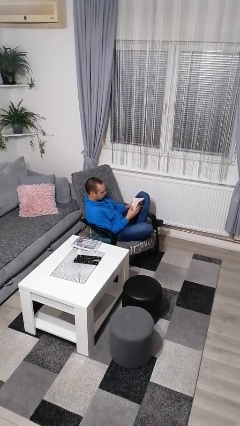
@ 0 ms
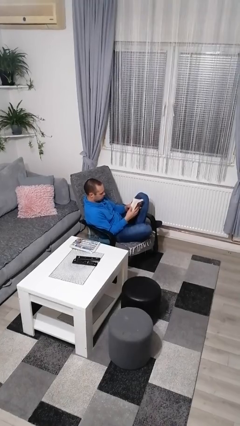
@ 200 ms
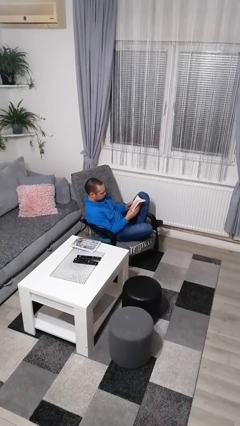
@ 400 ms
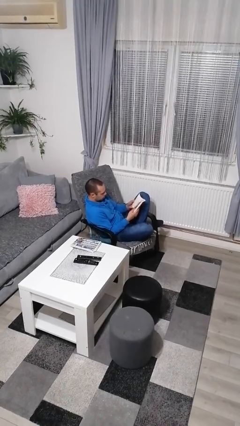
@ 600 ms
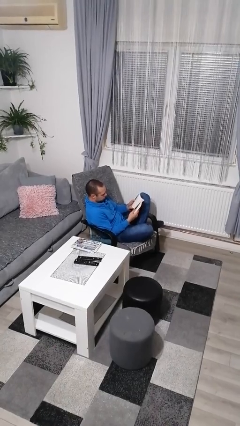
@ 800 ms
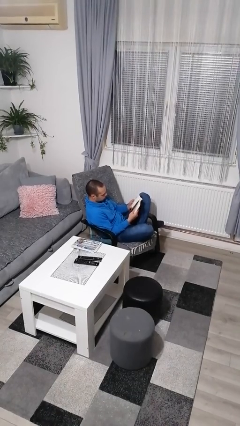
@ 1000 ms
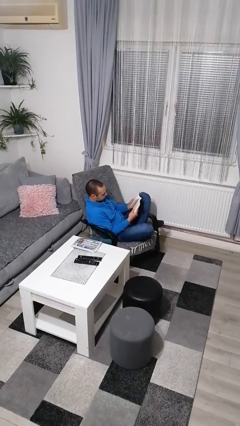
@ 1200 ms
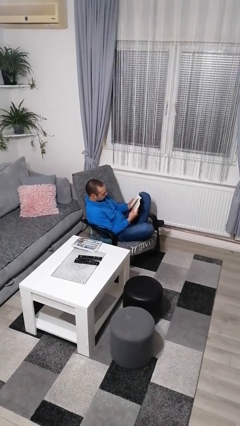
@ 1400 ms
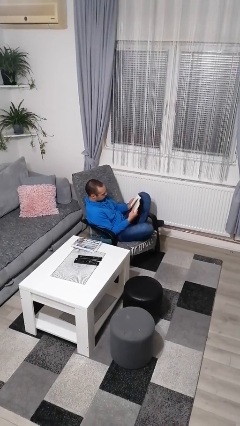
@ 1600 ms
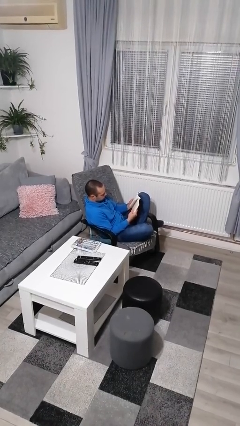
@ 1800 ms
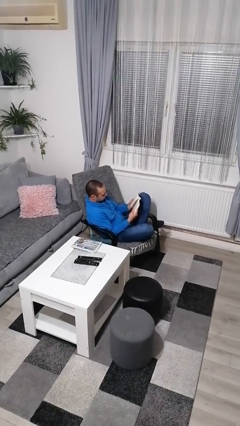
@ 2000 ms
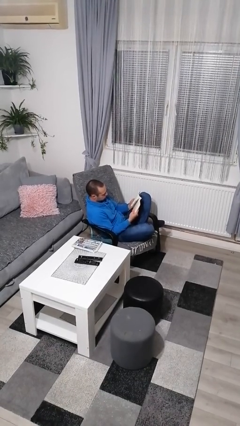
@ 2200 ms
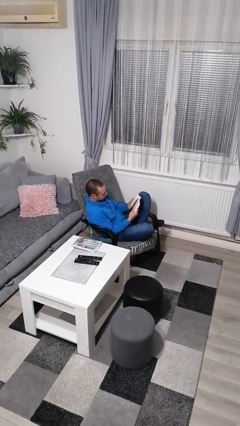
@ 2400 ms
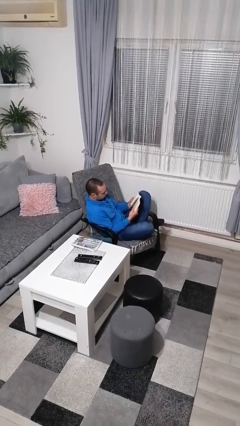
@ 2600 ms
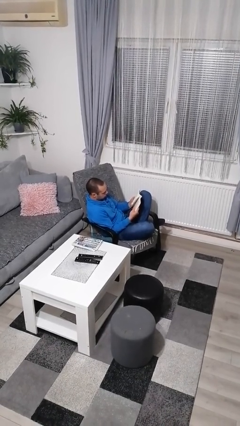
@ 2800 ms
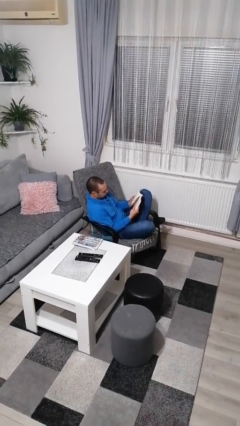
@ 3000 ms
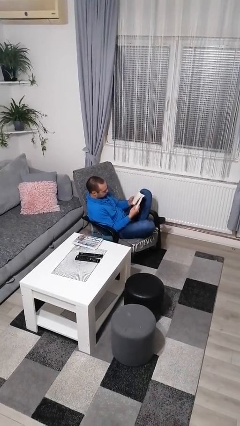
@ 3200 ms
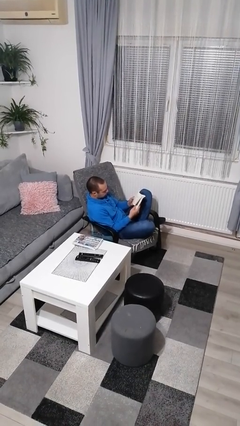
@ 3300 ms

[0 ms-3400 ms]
person reads book

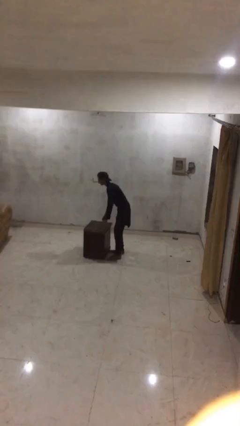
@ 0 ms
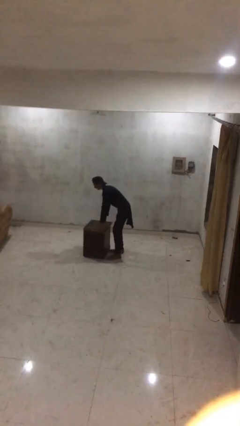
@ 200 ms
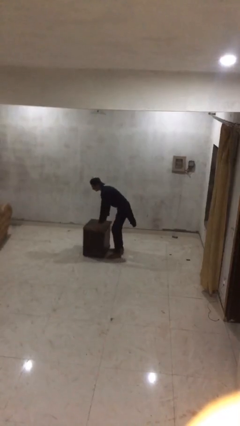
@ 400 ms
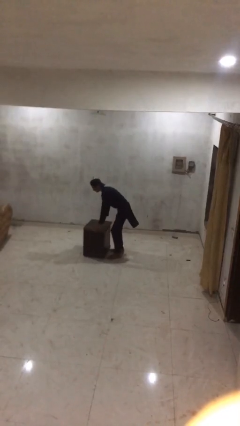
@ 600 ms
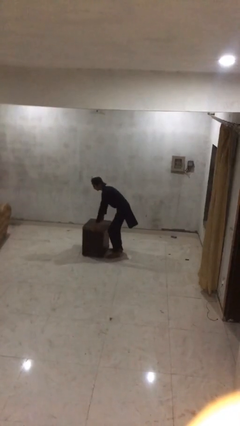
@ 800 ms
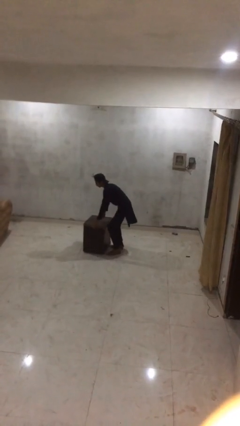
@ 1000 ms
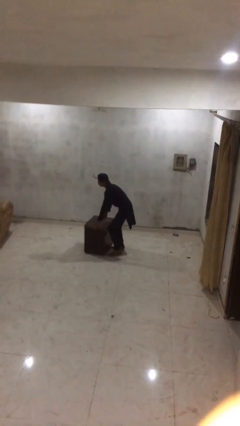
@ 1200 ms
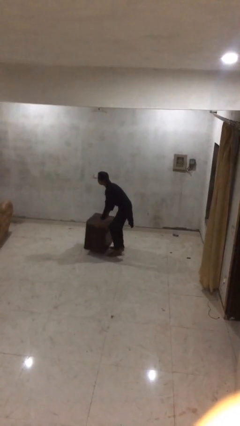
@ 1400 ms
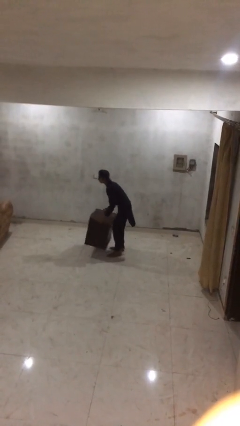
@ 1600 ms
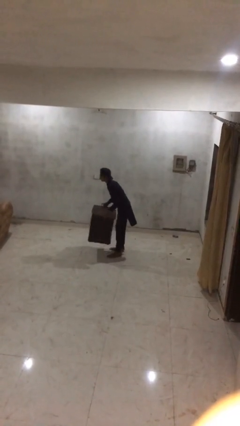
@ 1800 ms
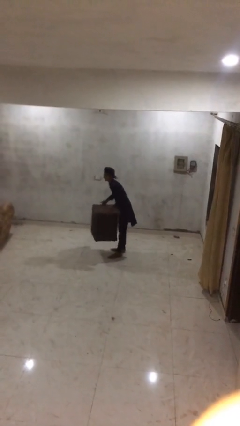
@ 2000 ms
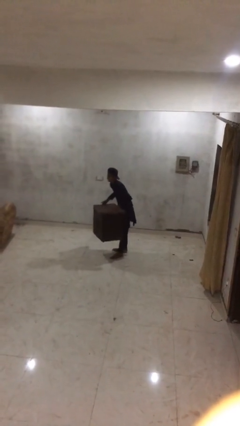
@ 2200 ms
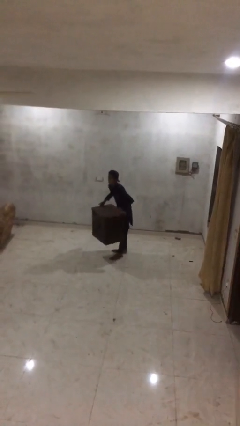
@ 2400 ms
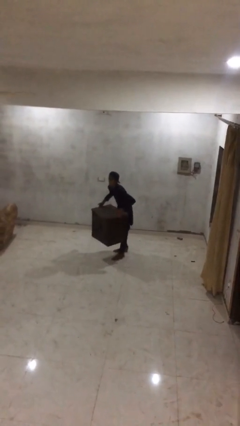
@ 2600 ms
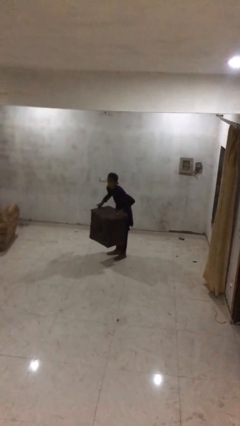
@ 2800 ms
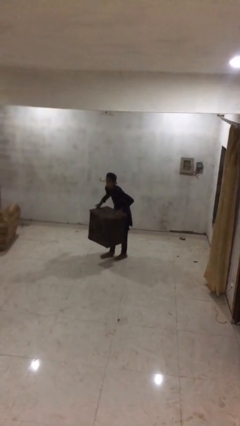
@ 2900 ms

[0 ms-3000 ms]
person picks up object from floor

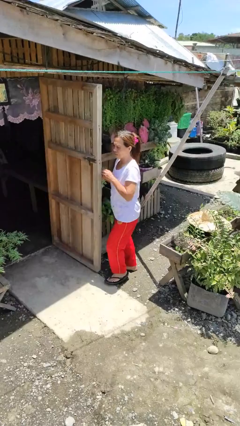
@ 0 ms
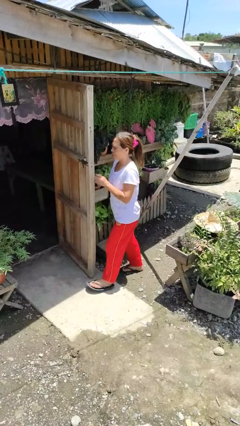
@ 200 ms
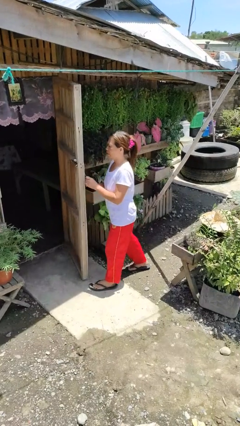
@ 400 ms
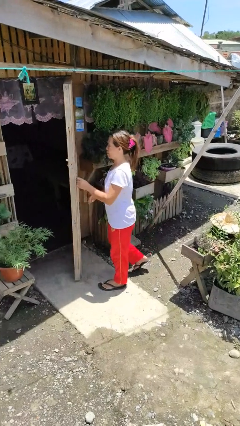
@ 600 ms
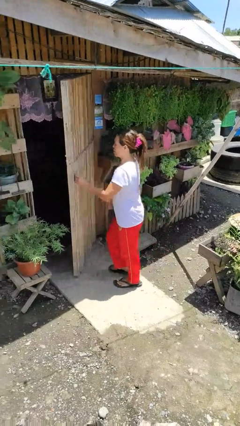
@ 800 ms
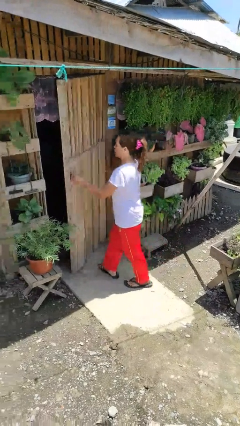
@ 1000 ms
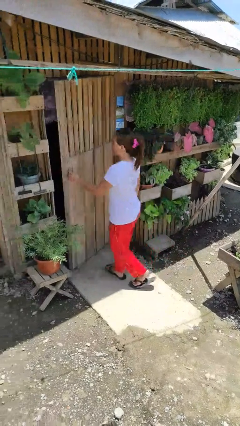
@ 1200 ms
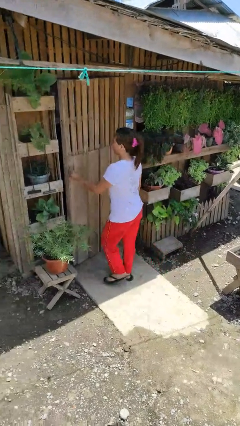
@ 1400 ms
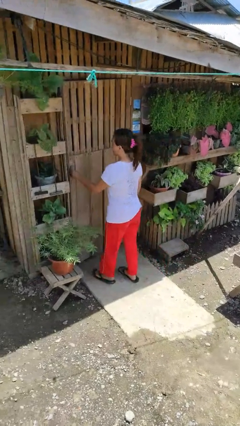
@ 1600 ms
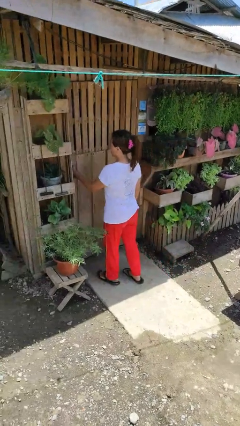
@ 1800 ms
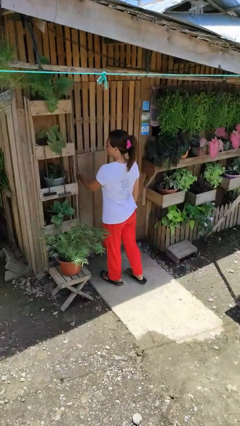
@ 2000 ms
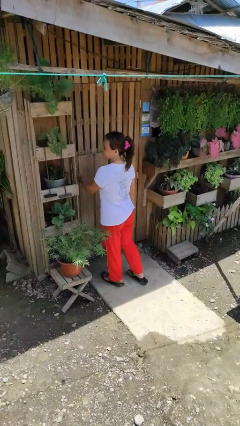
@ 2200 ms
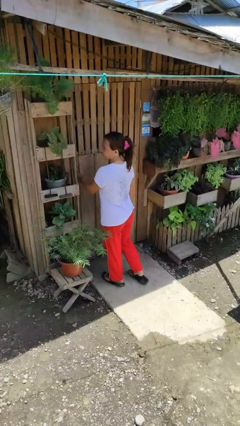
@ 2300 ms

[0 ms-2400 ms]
person closes facility door

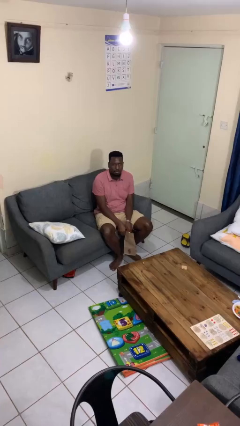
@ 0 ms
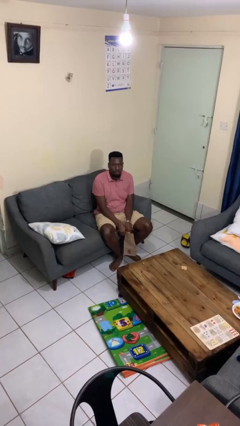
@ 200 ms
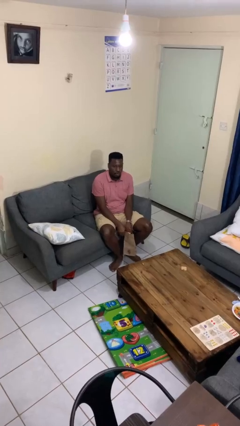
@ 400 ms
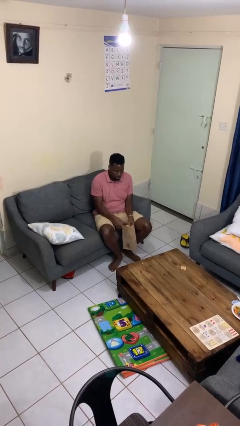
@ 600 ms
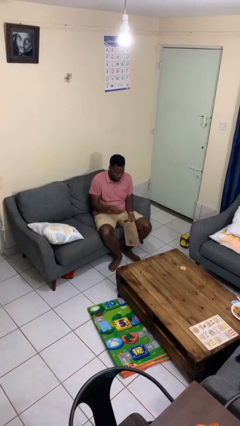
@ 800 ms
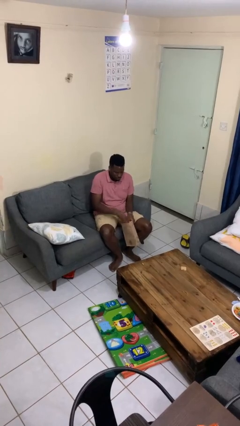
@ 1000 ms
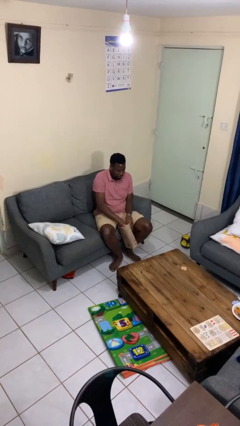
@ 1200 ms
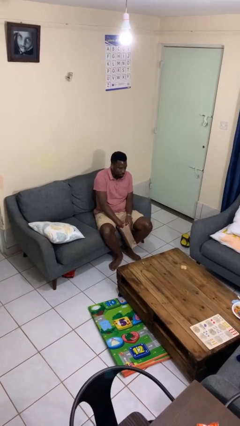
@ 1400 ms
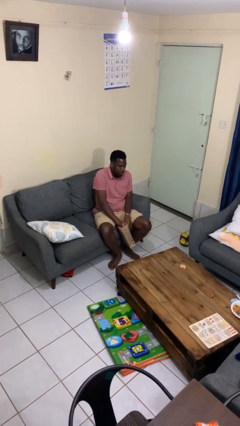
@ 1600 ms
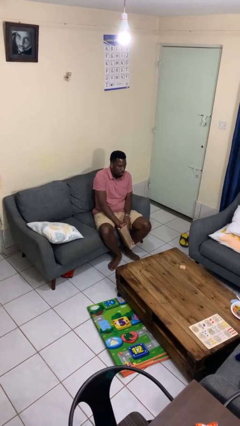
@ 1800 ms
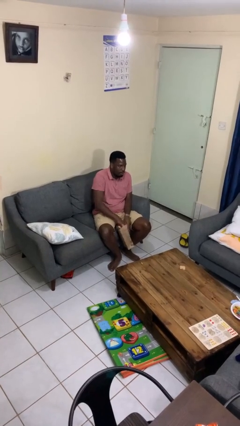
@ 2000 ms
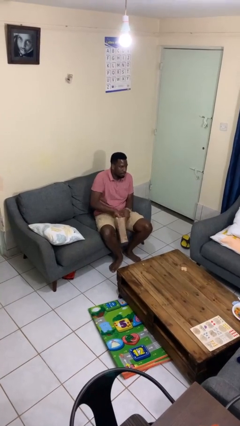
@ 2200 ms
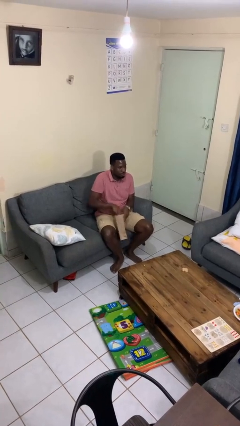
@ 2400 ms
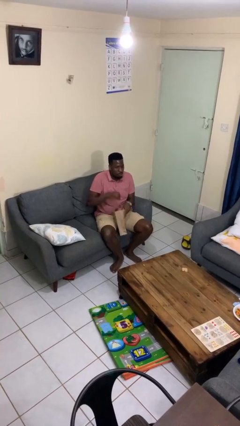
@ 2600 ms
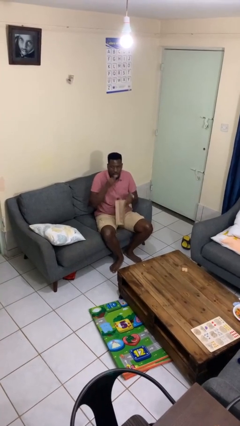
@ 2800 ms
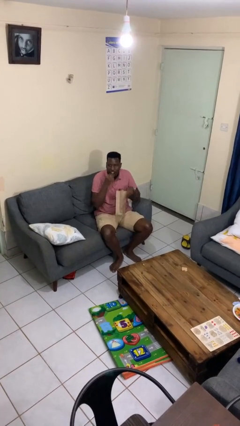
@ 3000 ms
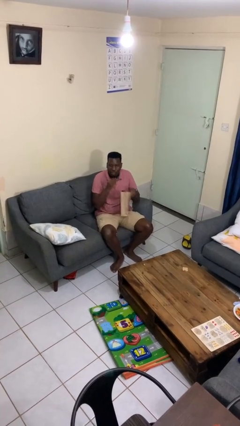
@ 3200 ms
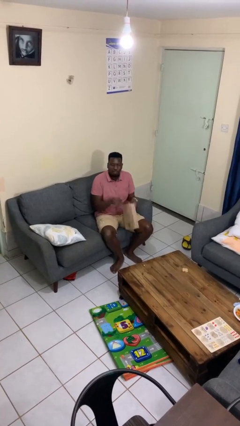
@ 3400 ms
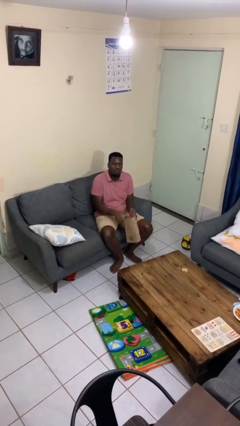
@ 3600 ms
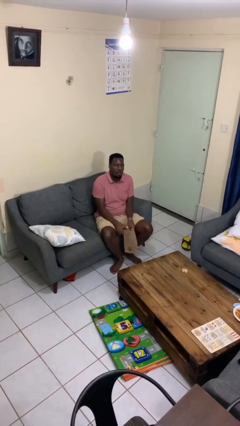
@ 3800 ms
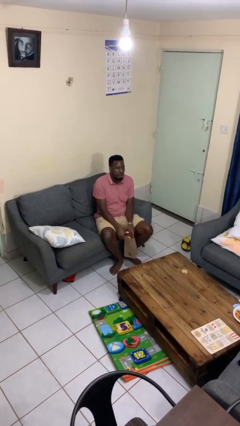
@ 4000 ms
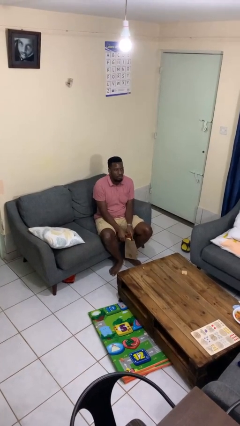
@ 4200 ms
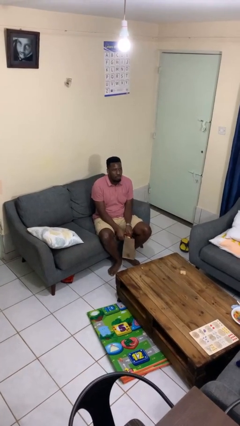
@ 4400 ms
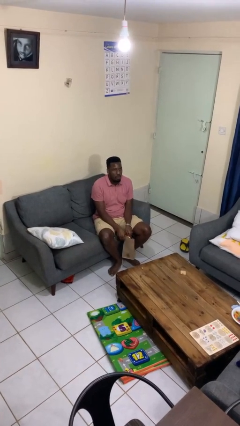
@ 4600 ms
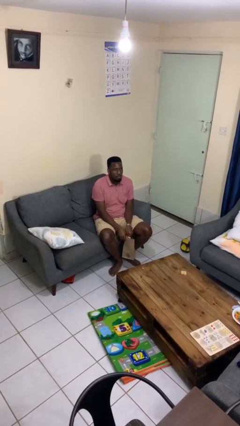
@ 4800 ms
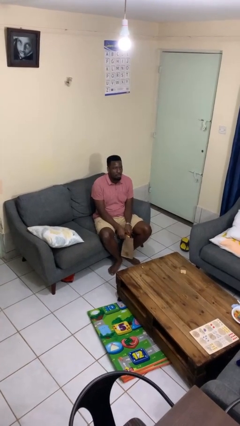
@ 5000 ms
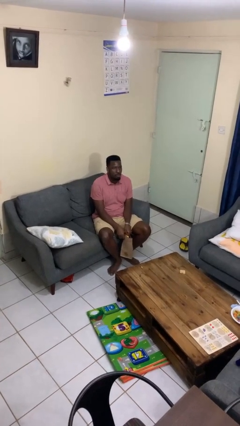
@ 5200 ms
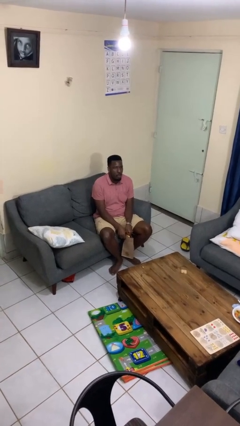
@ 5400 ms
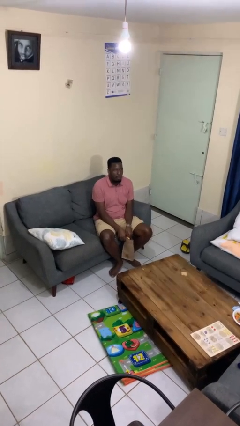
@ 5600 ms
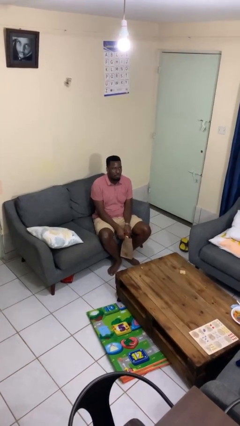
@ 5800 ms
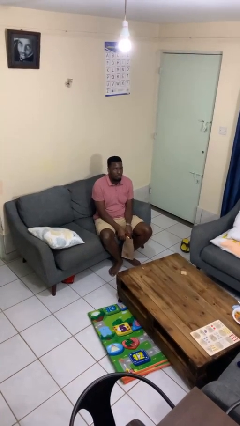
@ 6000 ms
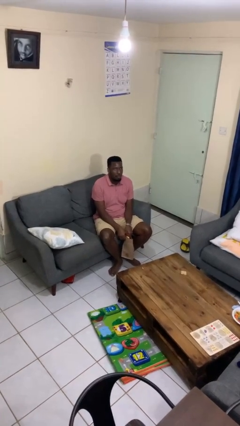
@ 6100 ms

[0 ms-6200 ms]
person eats snack from bag

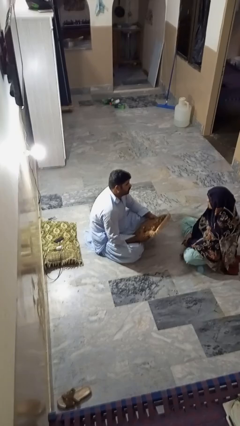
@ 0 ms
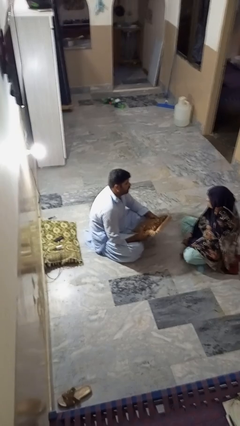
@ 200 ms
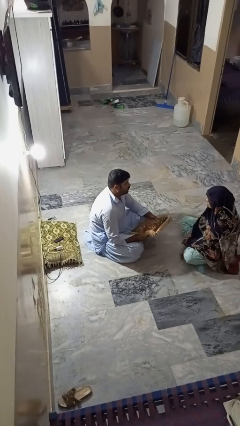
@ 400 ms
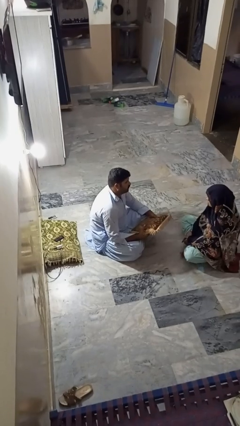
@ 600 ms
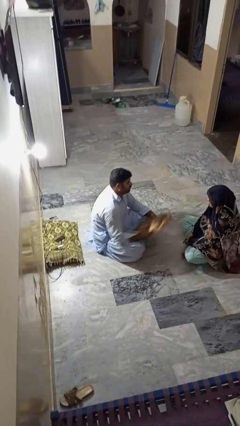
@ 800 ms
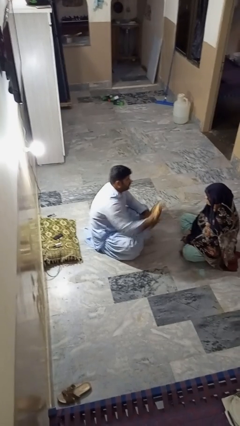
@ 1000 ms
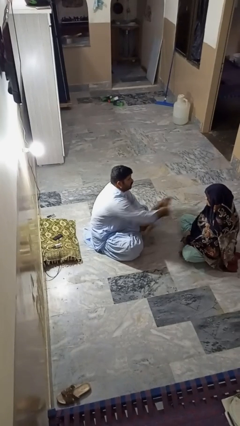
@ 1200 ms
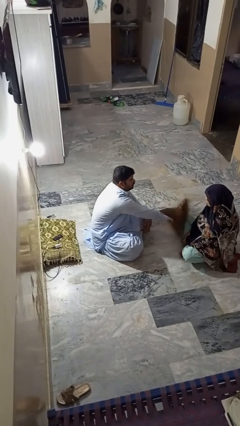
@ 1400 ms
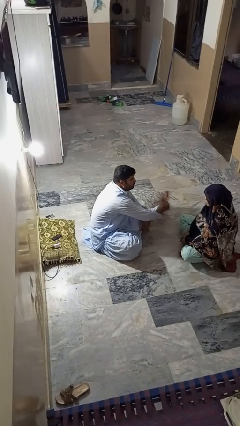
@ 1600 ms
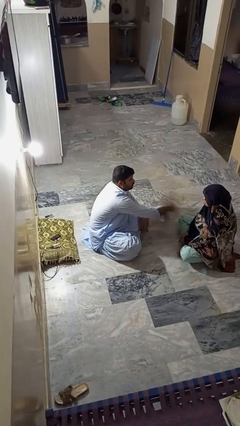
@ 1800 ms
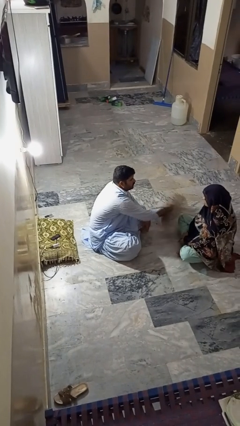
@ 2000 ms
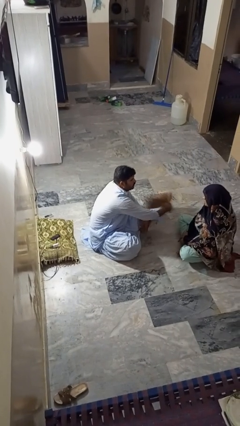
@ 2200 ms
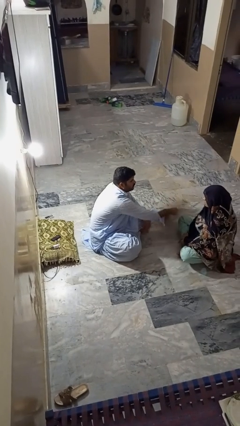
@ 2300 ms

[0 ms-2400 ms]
person hits person with pillow
